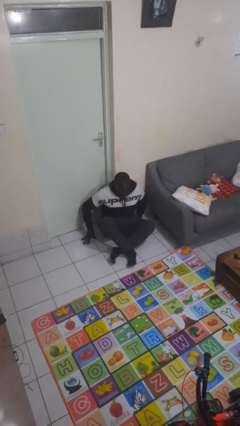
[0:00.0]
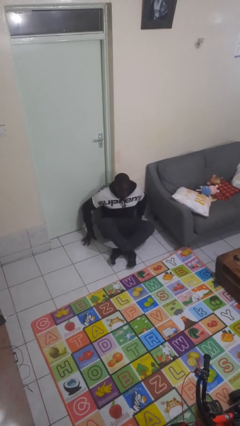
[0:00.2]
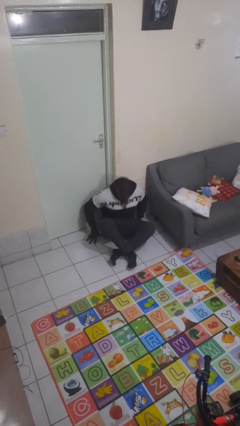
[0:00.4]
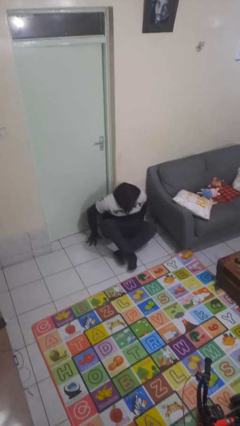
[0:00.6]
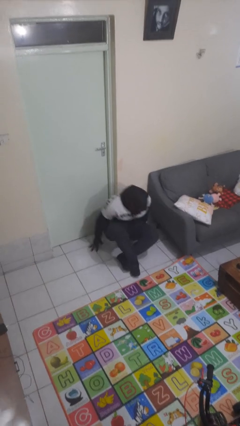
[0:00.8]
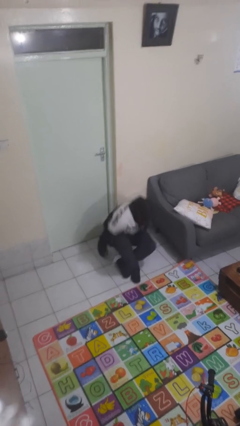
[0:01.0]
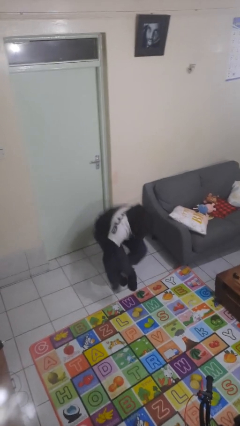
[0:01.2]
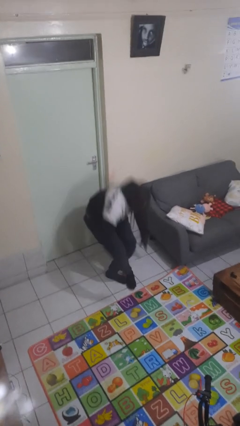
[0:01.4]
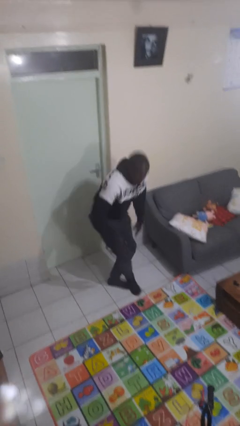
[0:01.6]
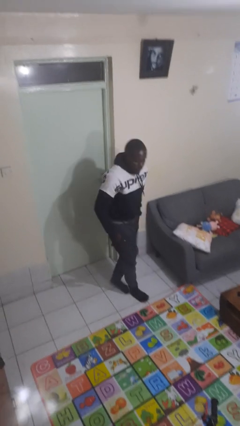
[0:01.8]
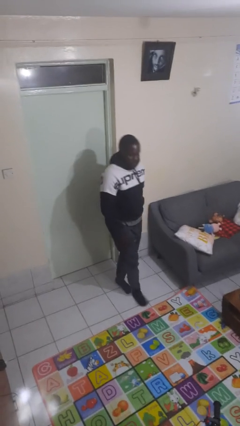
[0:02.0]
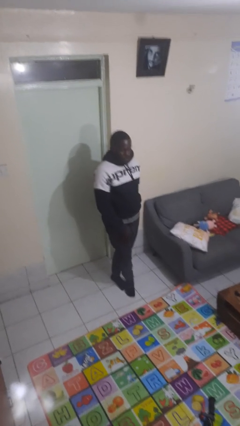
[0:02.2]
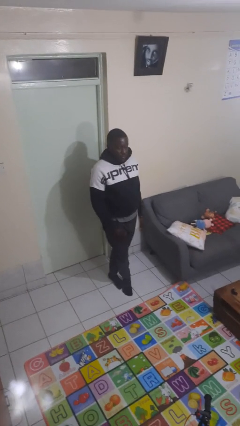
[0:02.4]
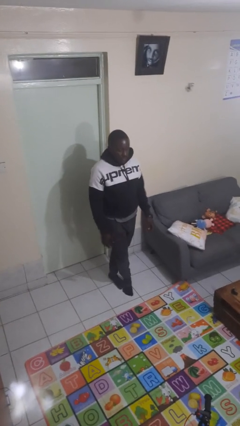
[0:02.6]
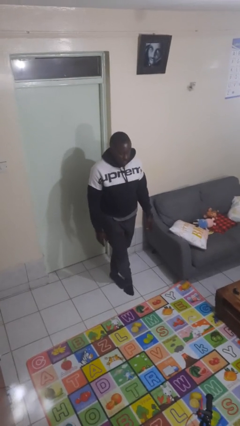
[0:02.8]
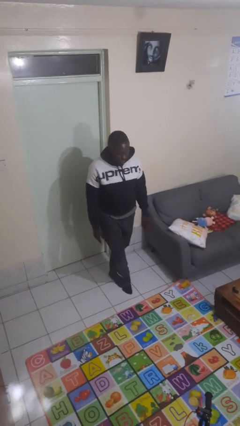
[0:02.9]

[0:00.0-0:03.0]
person stands up from floor

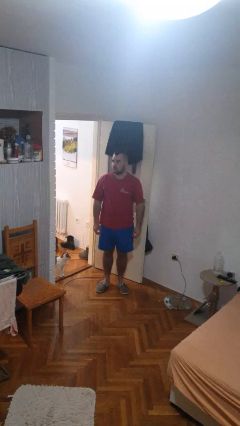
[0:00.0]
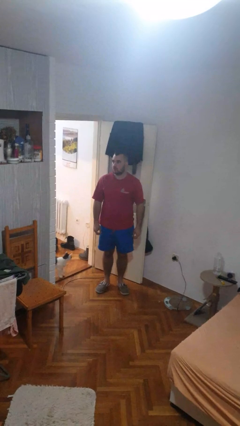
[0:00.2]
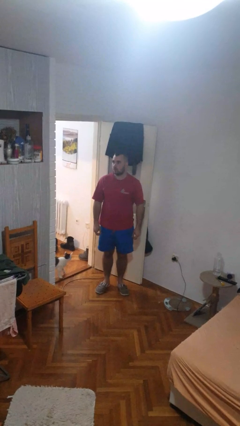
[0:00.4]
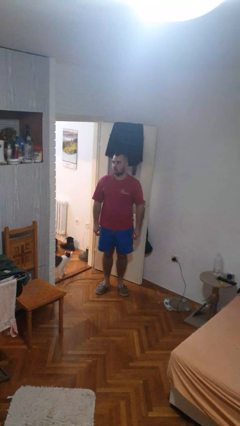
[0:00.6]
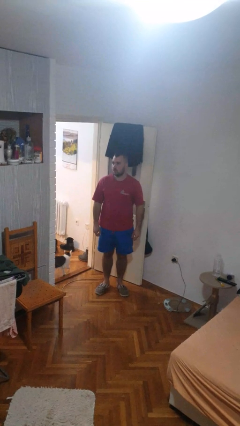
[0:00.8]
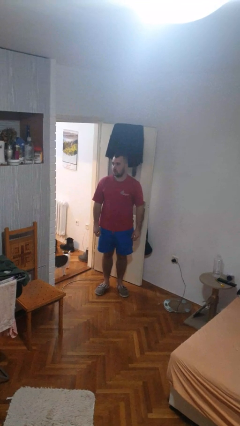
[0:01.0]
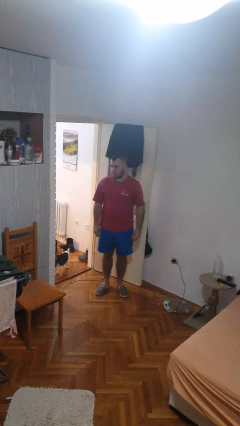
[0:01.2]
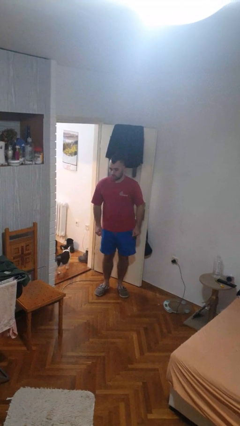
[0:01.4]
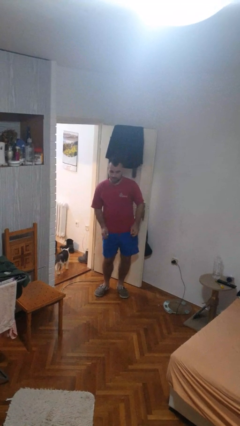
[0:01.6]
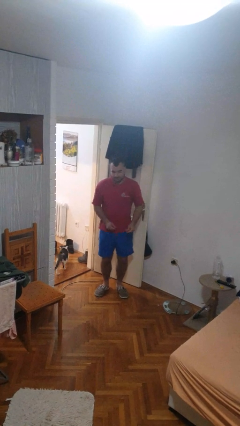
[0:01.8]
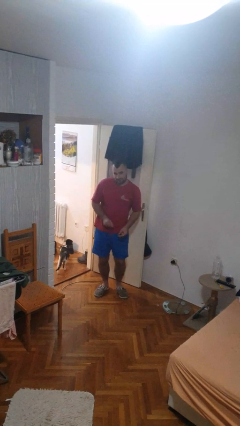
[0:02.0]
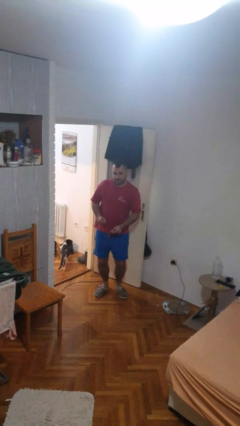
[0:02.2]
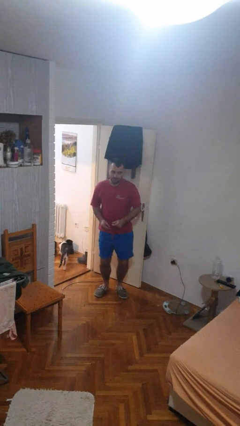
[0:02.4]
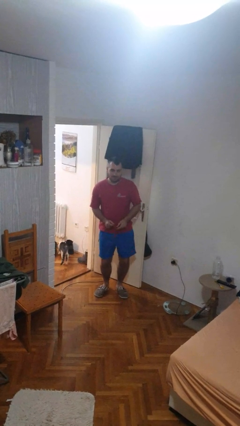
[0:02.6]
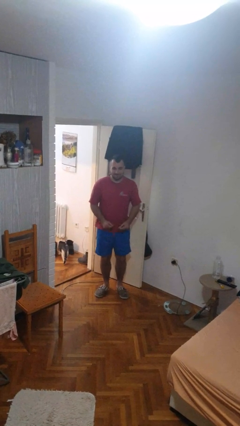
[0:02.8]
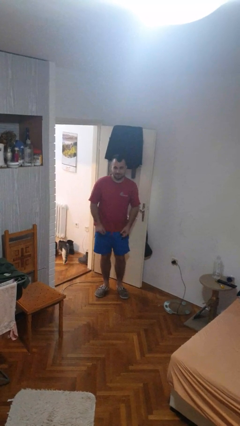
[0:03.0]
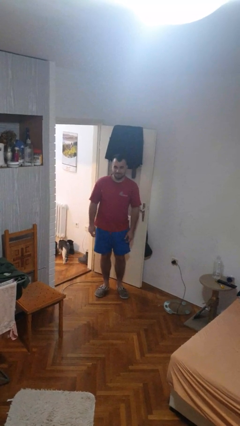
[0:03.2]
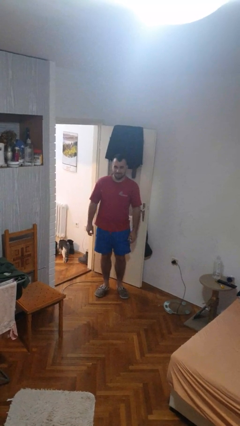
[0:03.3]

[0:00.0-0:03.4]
person dances in place

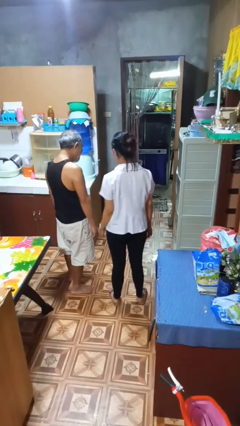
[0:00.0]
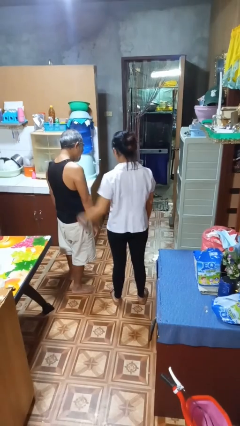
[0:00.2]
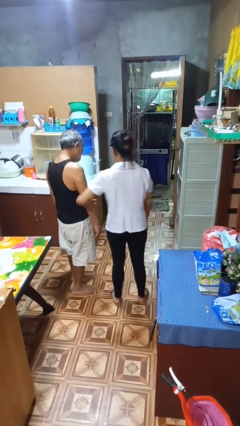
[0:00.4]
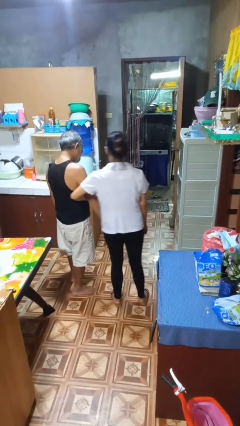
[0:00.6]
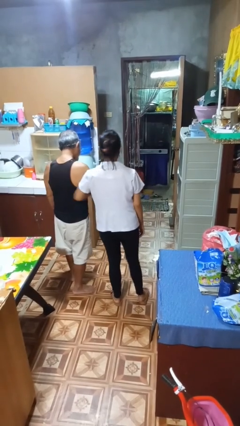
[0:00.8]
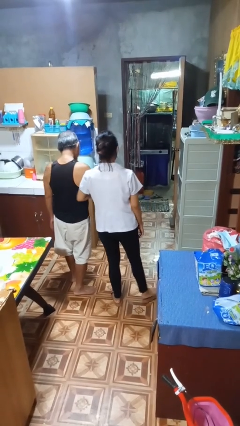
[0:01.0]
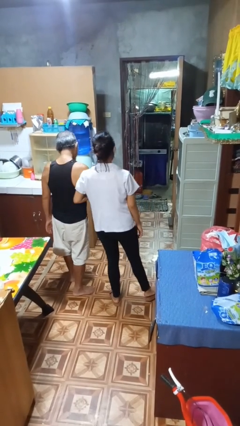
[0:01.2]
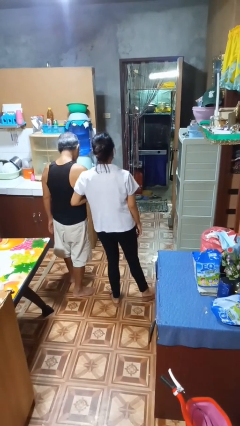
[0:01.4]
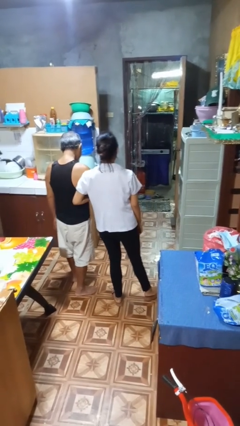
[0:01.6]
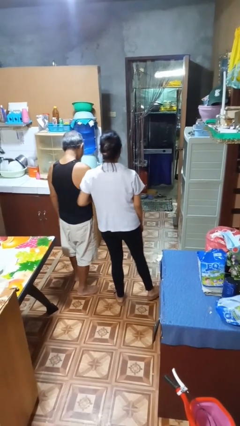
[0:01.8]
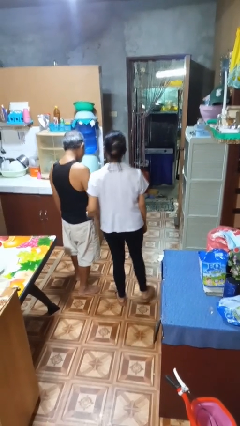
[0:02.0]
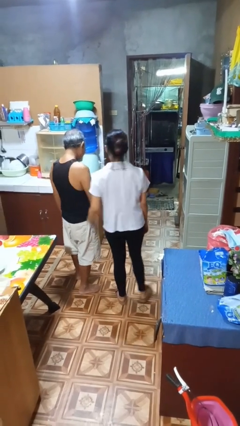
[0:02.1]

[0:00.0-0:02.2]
person grabs person by forearm

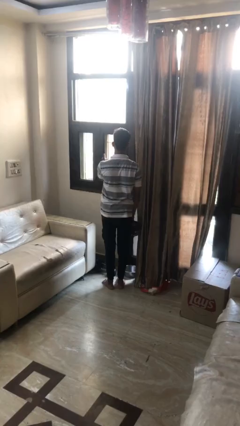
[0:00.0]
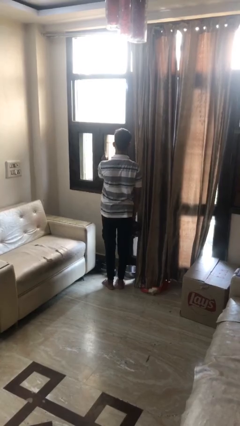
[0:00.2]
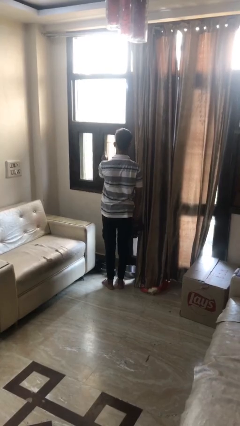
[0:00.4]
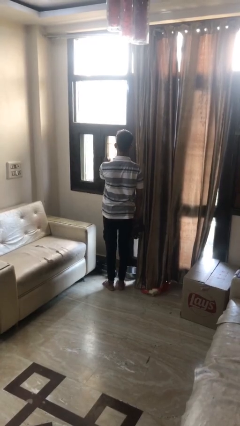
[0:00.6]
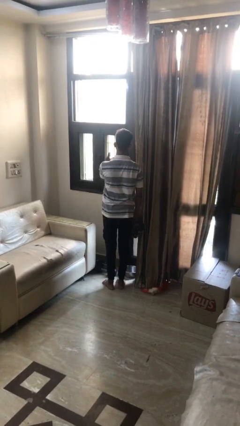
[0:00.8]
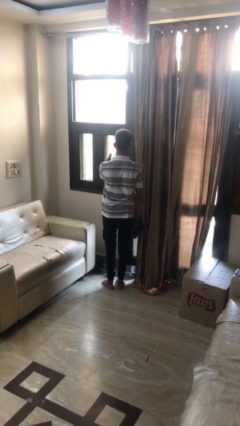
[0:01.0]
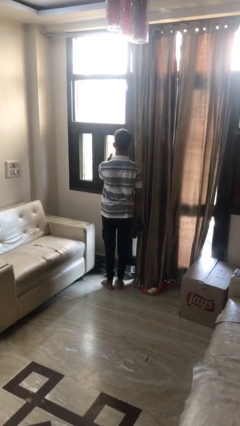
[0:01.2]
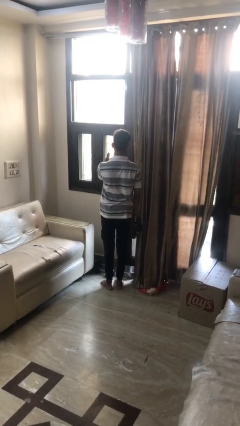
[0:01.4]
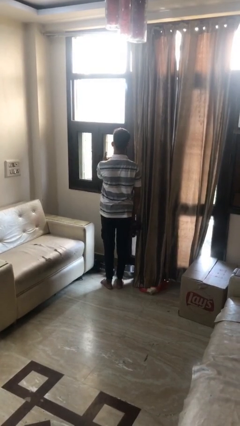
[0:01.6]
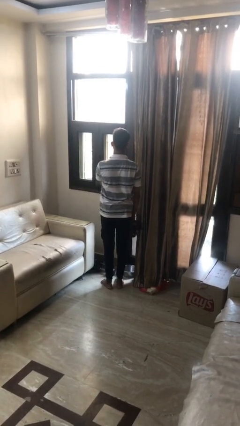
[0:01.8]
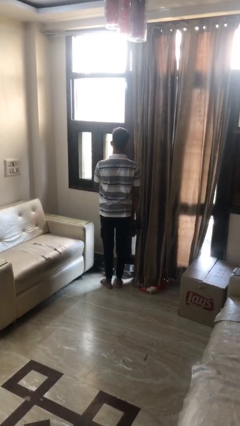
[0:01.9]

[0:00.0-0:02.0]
person sprays from bottle

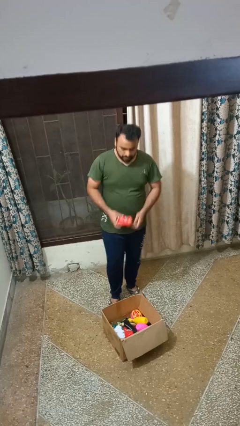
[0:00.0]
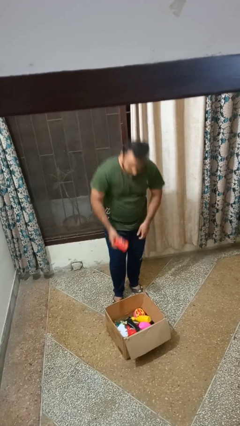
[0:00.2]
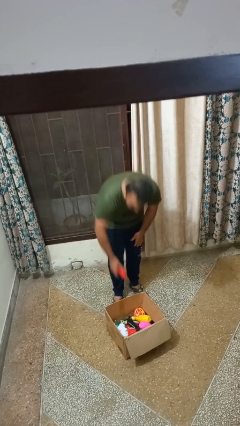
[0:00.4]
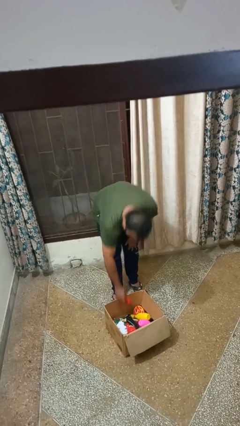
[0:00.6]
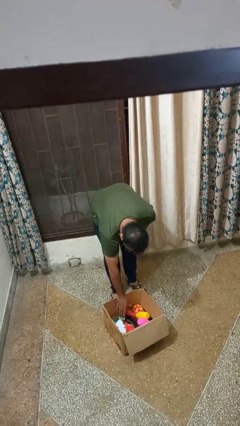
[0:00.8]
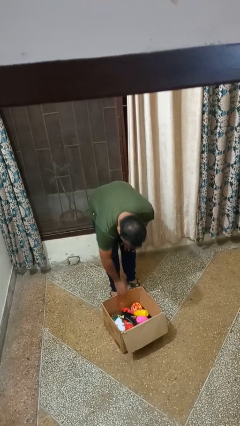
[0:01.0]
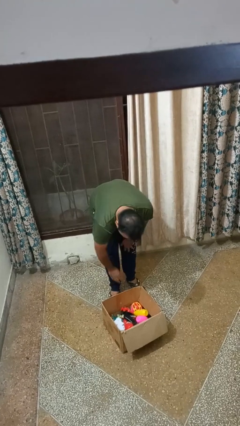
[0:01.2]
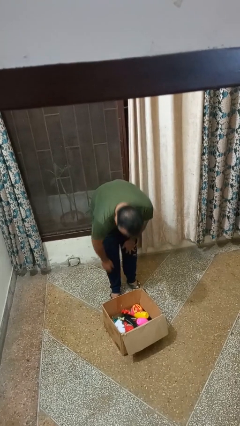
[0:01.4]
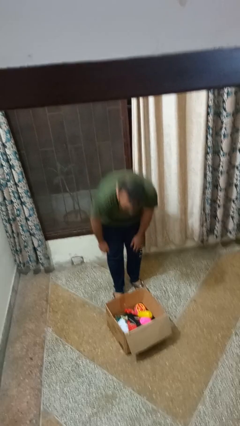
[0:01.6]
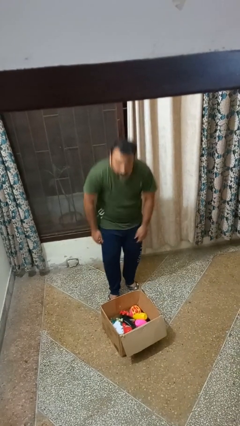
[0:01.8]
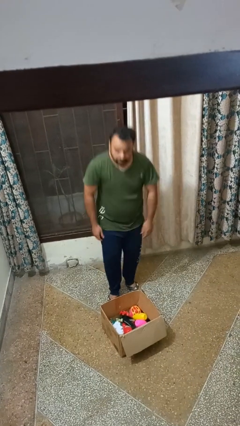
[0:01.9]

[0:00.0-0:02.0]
person puts object into box

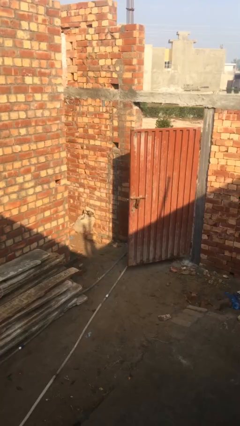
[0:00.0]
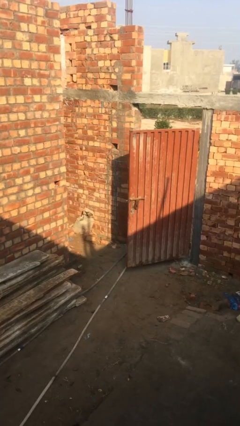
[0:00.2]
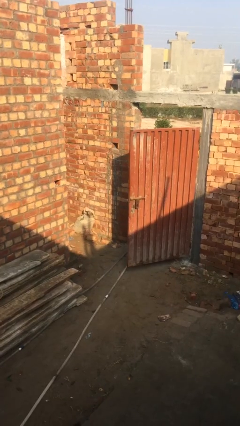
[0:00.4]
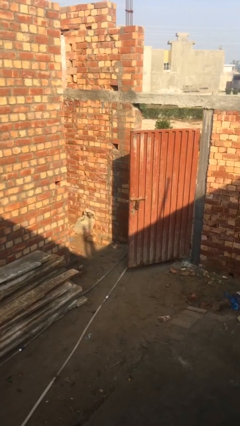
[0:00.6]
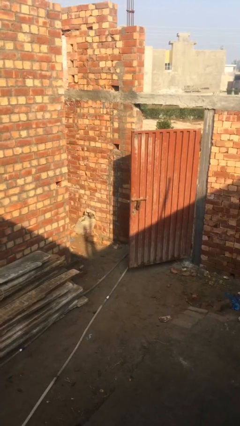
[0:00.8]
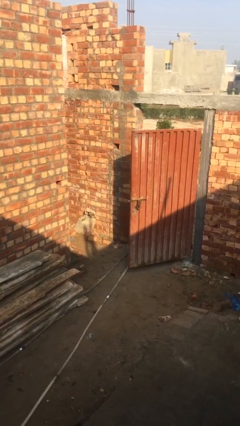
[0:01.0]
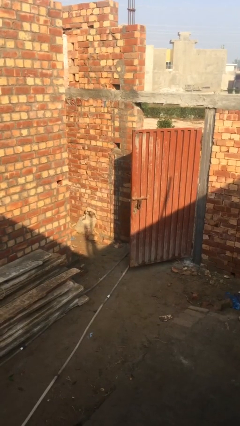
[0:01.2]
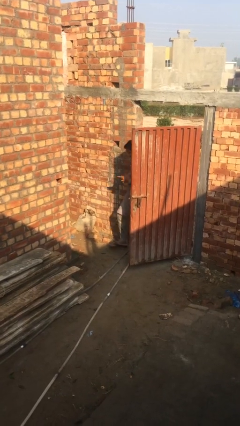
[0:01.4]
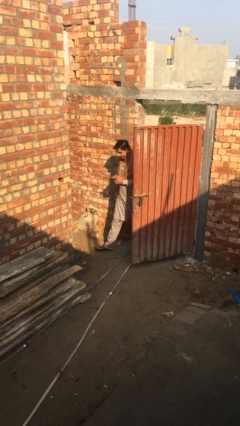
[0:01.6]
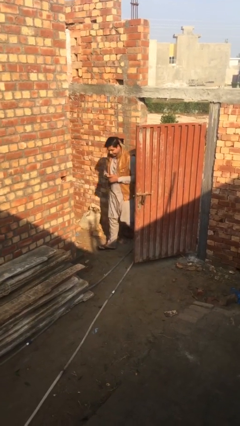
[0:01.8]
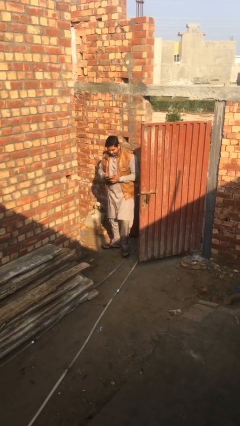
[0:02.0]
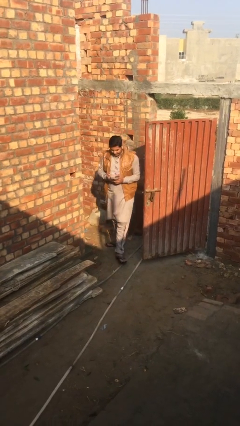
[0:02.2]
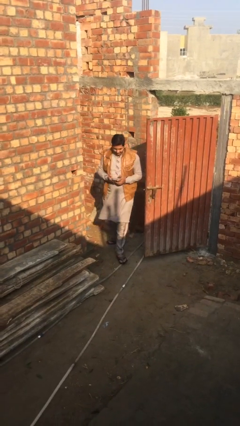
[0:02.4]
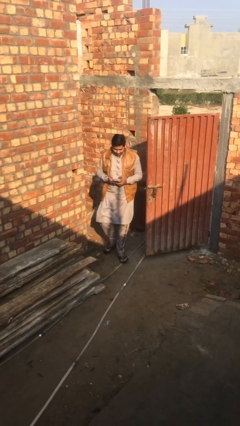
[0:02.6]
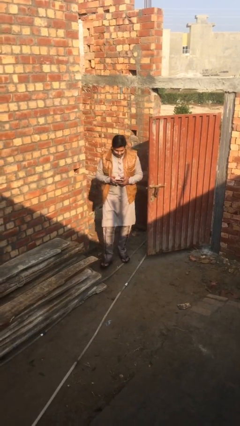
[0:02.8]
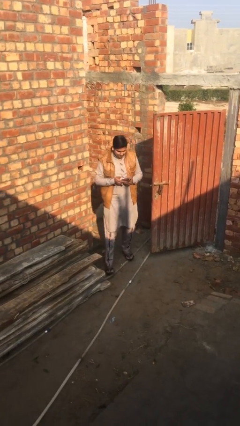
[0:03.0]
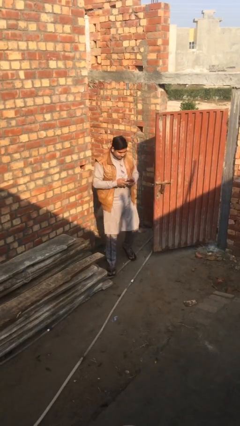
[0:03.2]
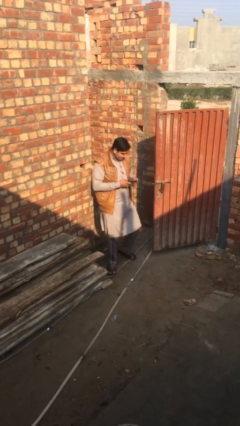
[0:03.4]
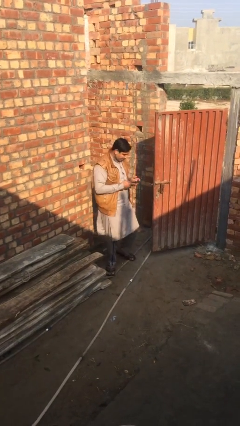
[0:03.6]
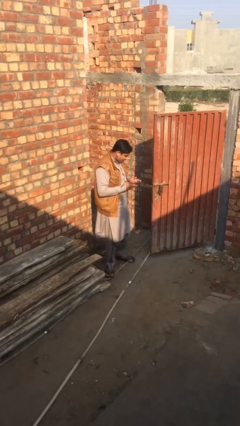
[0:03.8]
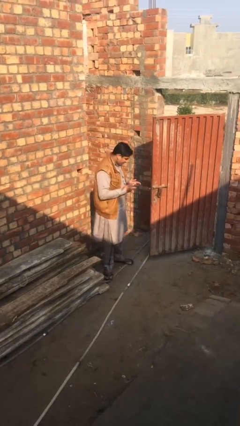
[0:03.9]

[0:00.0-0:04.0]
person enters scene through structure

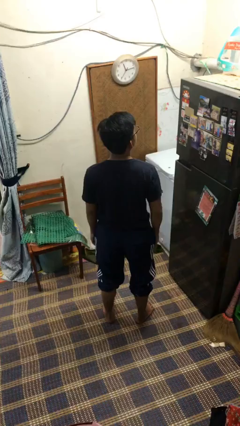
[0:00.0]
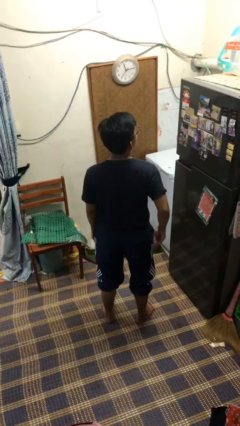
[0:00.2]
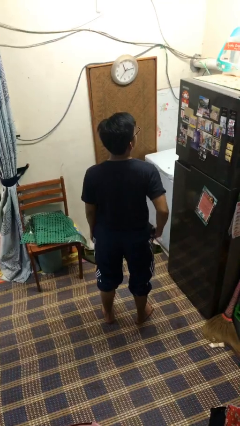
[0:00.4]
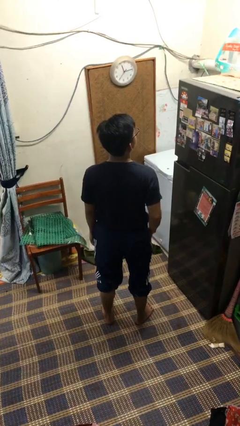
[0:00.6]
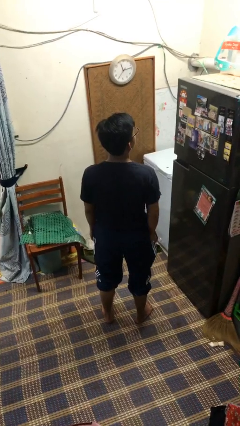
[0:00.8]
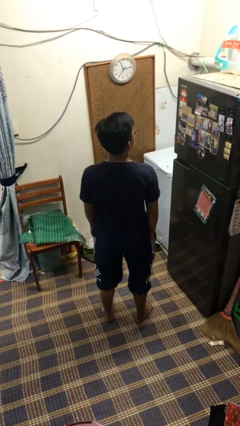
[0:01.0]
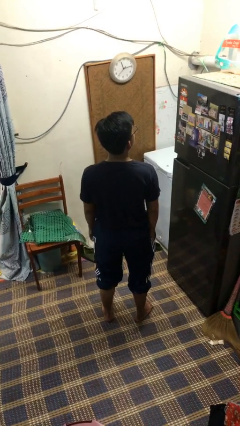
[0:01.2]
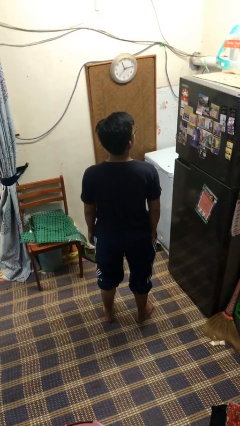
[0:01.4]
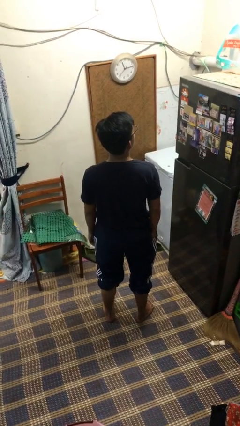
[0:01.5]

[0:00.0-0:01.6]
person puts hands in back pockets
